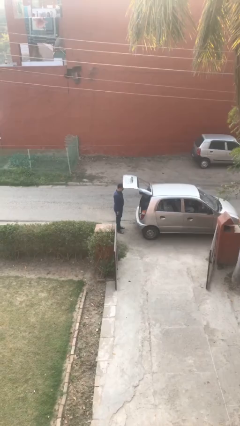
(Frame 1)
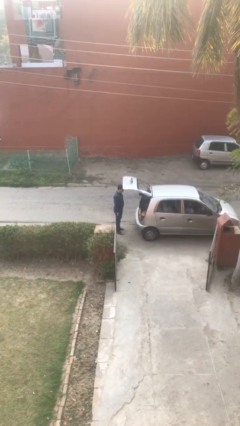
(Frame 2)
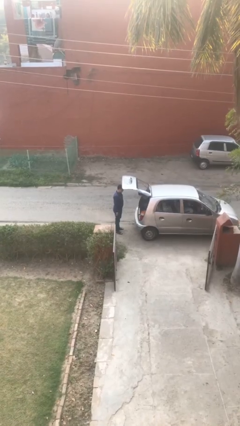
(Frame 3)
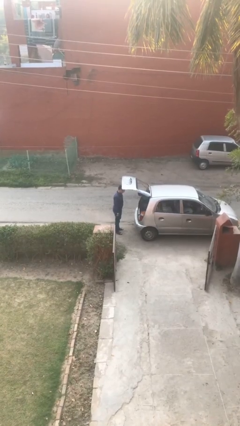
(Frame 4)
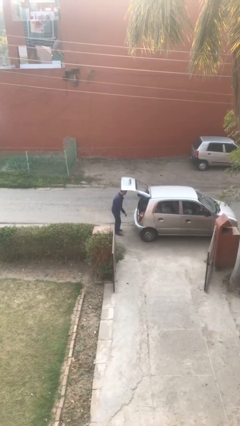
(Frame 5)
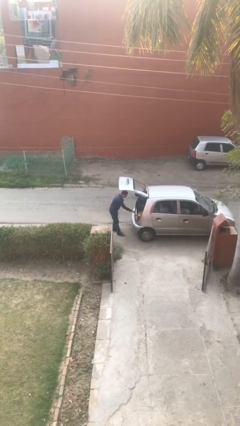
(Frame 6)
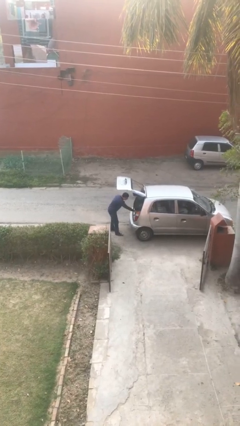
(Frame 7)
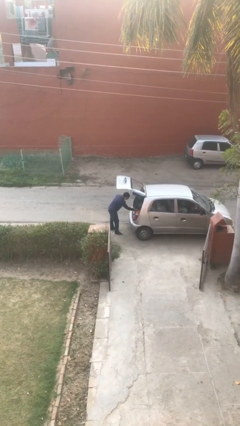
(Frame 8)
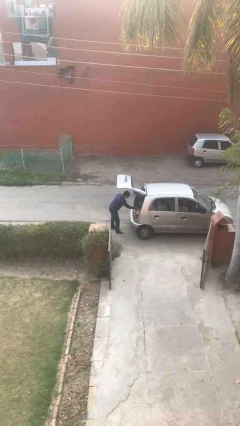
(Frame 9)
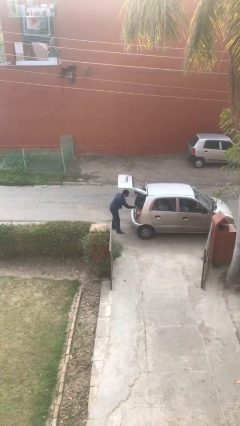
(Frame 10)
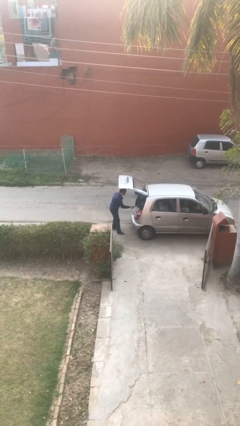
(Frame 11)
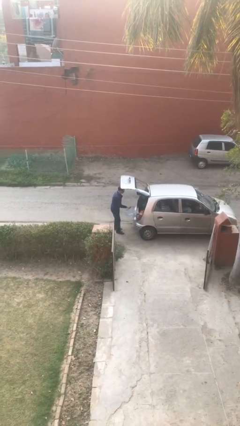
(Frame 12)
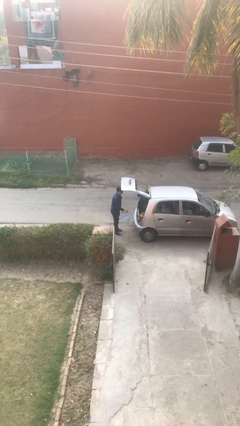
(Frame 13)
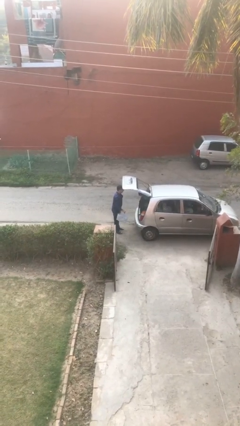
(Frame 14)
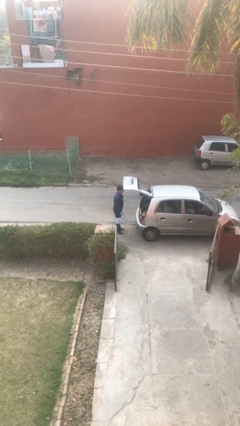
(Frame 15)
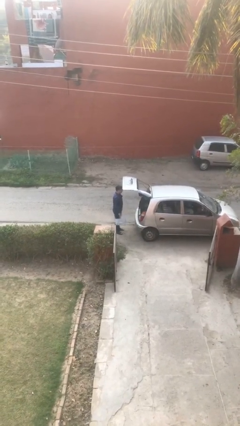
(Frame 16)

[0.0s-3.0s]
person unloads car

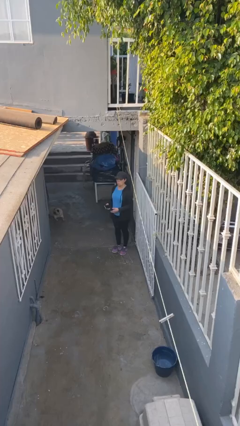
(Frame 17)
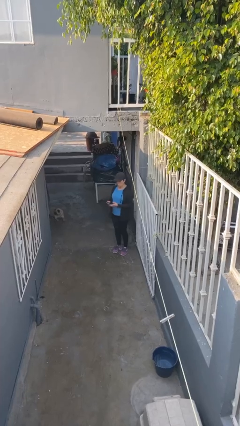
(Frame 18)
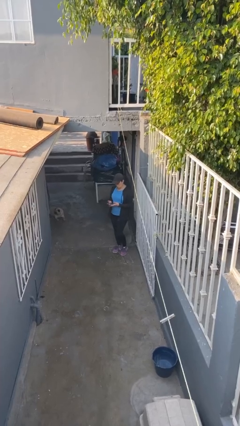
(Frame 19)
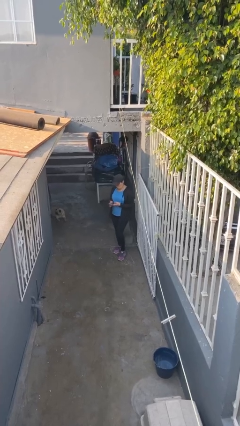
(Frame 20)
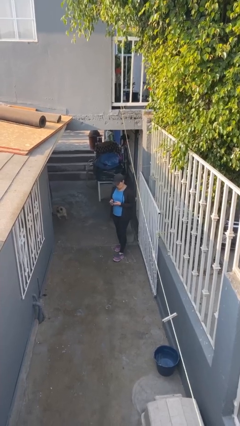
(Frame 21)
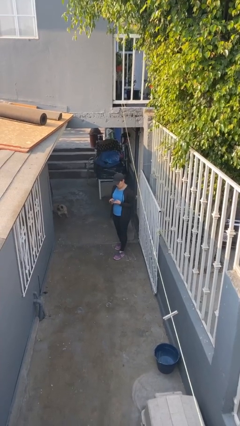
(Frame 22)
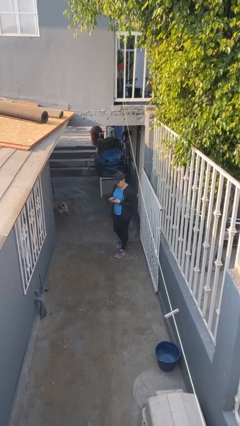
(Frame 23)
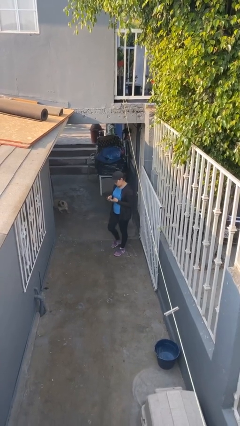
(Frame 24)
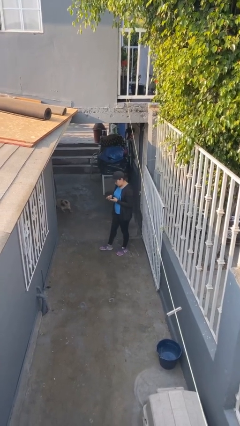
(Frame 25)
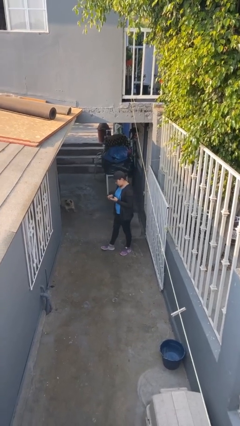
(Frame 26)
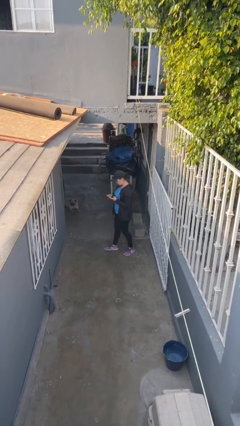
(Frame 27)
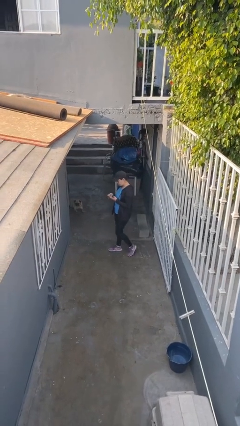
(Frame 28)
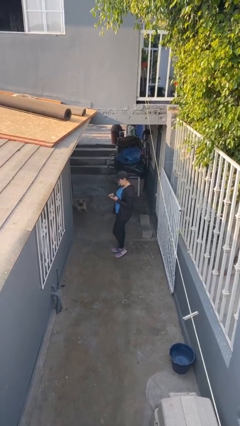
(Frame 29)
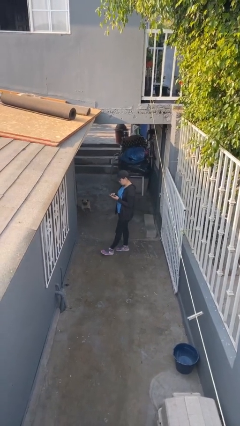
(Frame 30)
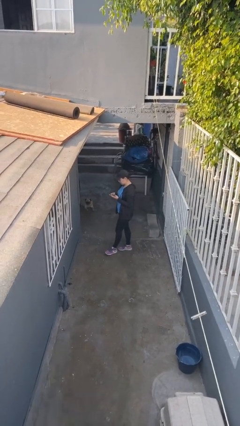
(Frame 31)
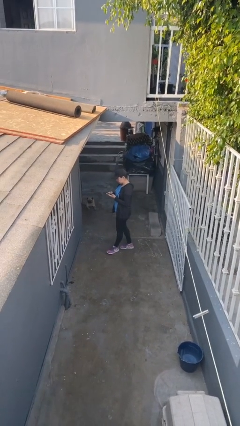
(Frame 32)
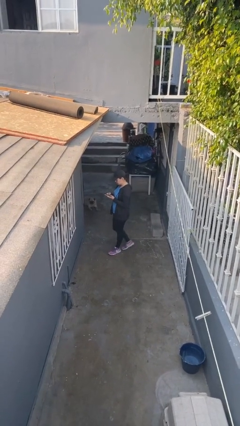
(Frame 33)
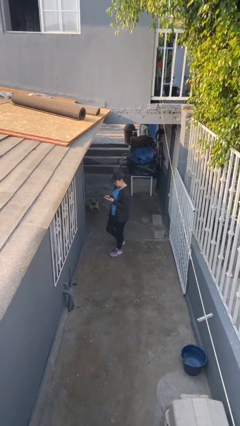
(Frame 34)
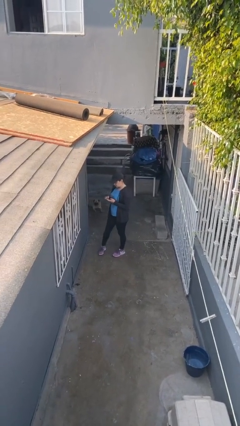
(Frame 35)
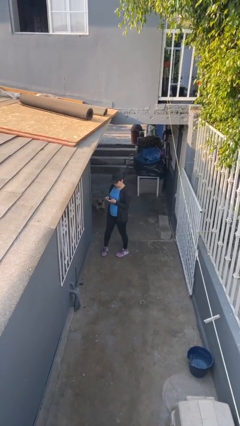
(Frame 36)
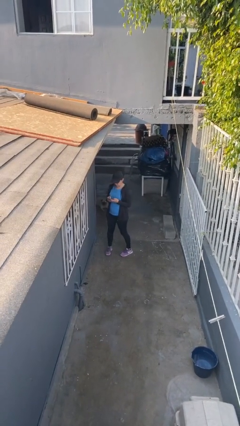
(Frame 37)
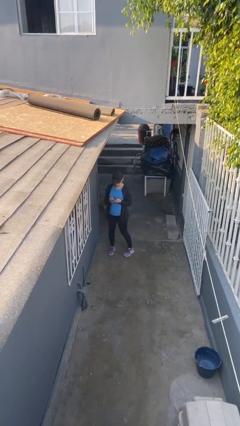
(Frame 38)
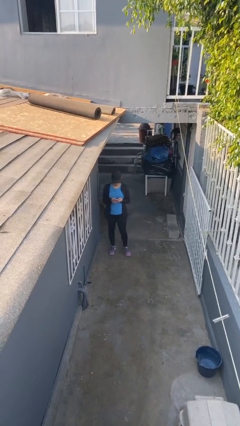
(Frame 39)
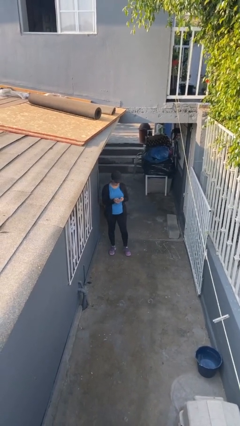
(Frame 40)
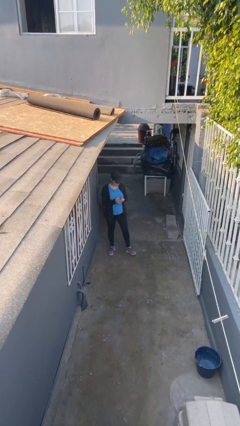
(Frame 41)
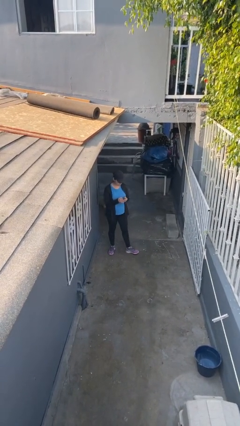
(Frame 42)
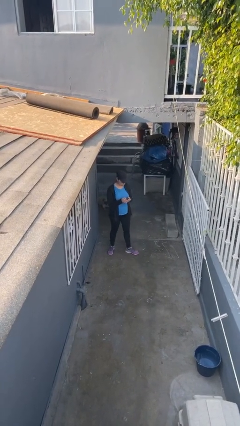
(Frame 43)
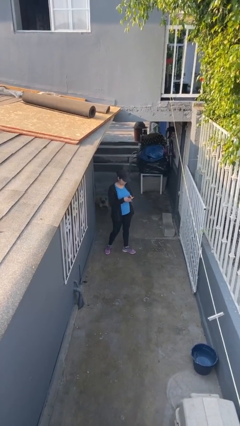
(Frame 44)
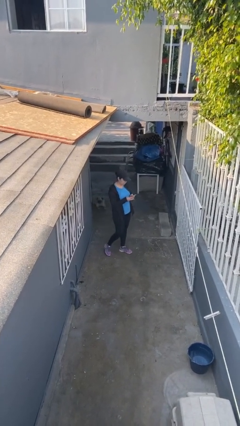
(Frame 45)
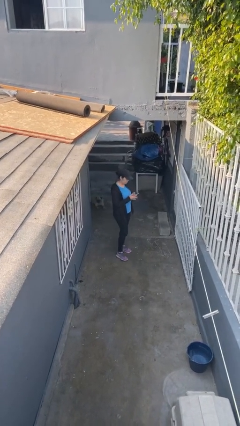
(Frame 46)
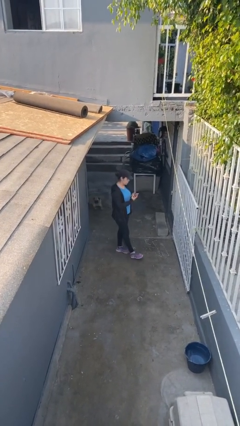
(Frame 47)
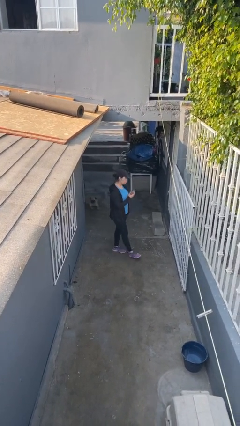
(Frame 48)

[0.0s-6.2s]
person texts on phone

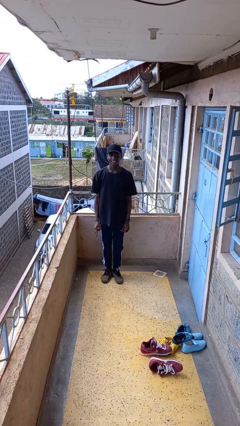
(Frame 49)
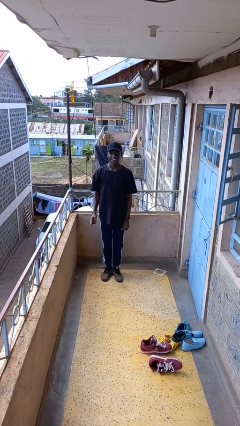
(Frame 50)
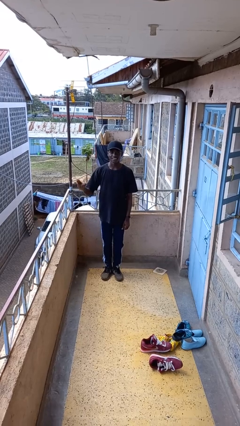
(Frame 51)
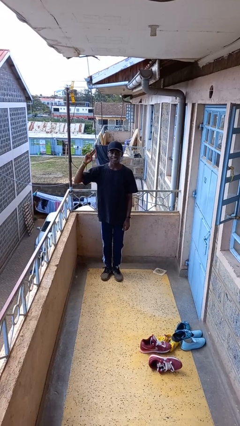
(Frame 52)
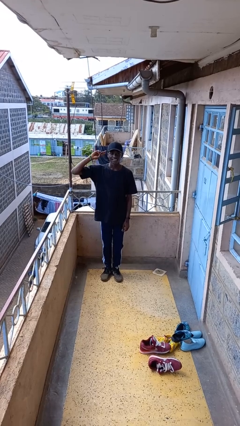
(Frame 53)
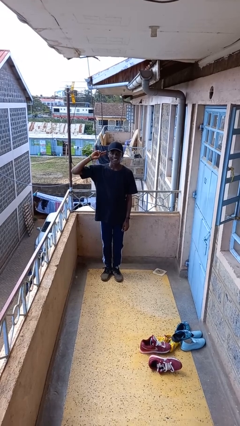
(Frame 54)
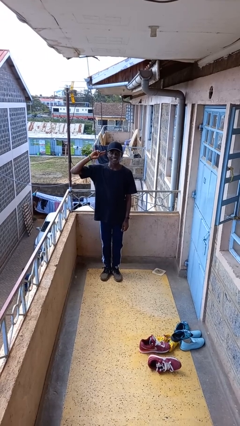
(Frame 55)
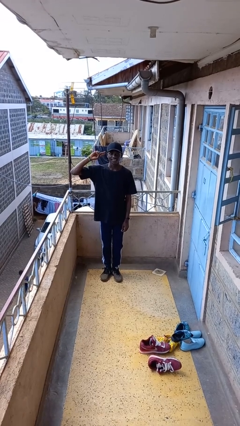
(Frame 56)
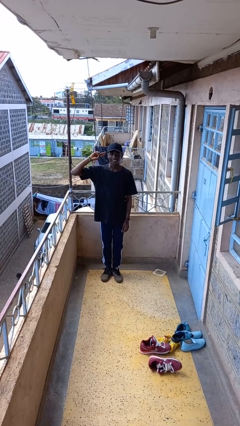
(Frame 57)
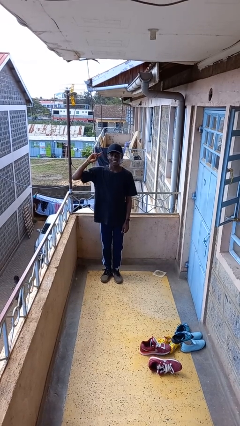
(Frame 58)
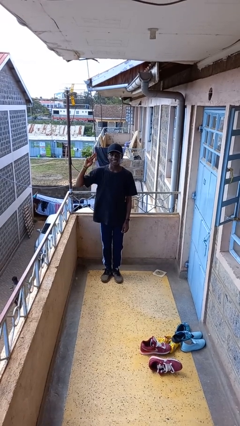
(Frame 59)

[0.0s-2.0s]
person salutes

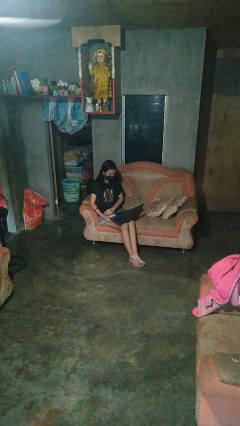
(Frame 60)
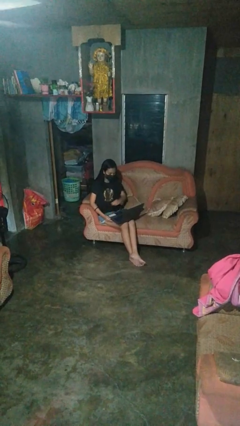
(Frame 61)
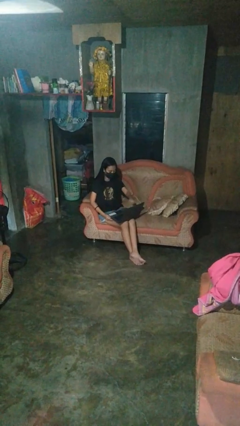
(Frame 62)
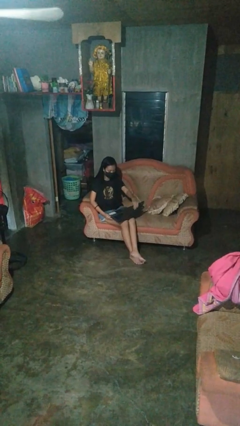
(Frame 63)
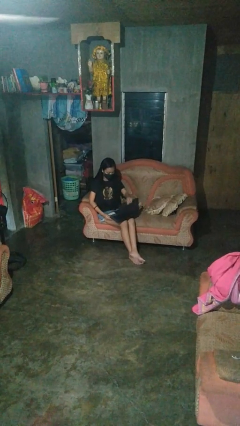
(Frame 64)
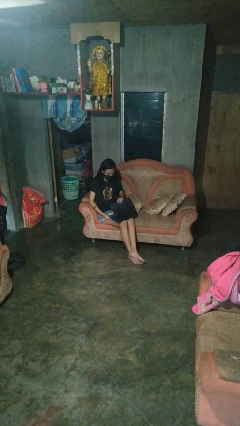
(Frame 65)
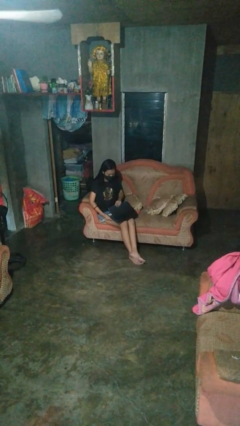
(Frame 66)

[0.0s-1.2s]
person closes laptop

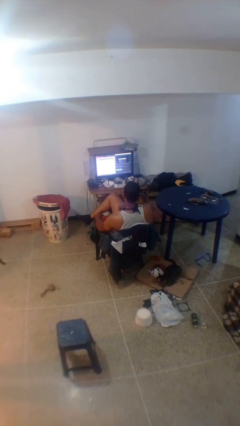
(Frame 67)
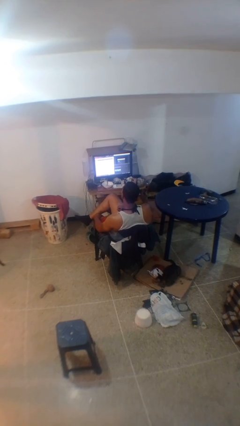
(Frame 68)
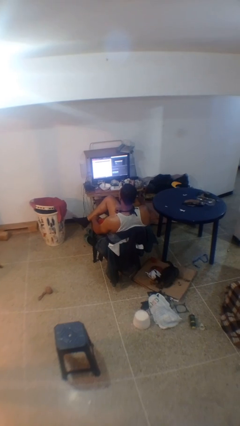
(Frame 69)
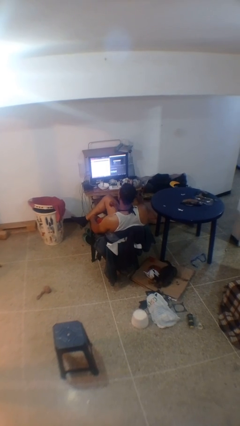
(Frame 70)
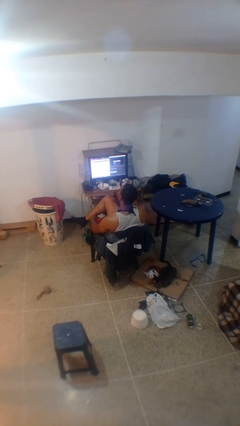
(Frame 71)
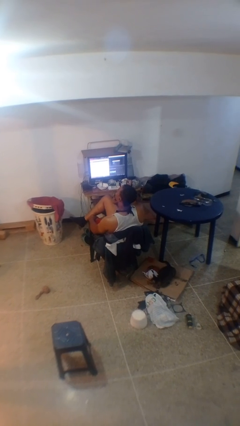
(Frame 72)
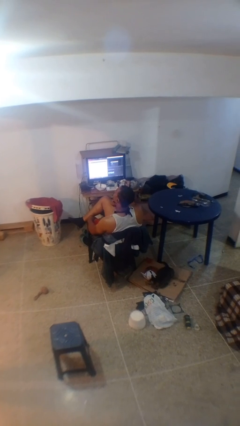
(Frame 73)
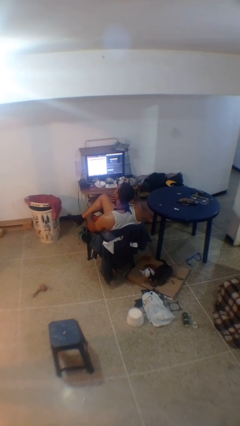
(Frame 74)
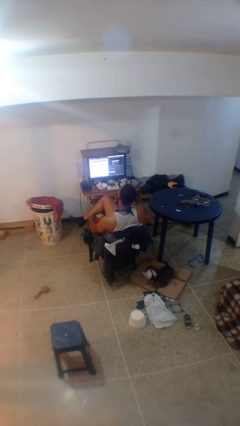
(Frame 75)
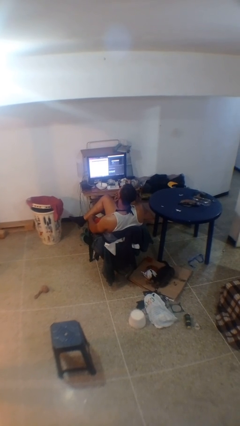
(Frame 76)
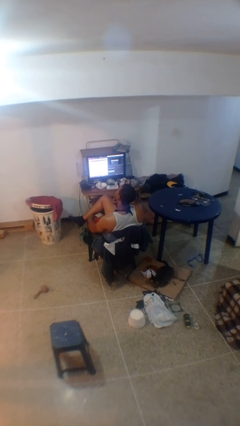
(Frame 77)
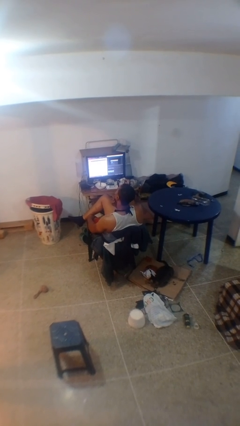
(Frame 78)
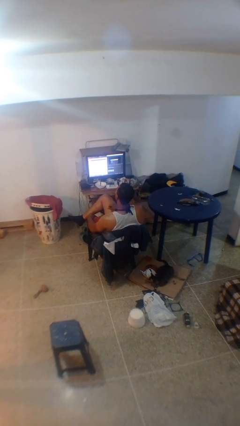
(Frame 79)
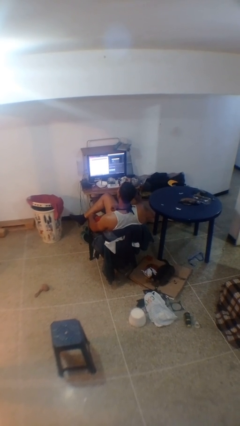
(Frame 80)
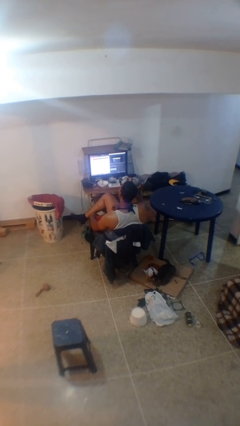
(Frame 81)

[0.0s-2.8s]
person strokes chin

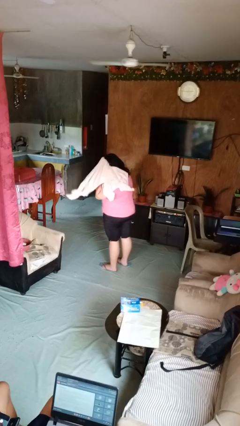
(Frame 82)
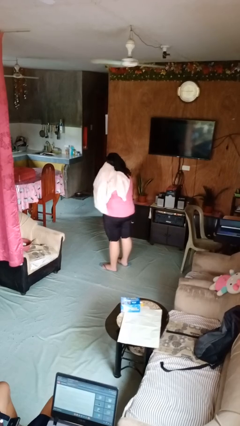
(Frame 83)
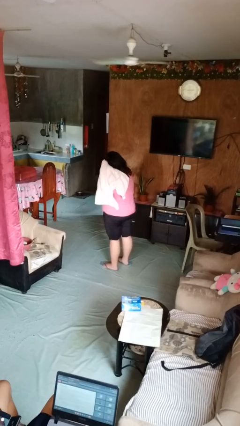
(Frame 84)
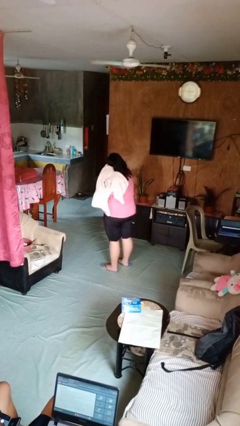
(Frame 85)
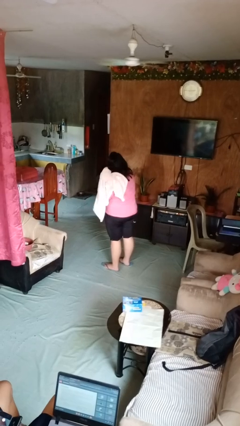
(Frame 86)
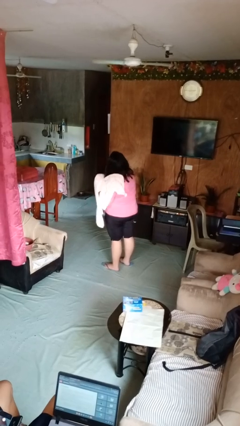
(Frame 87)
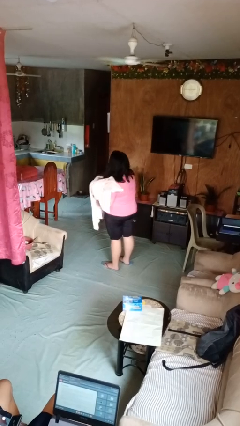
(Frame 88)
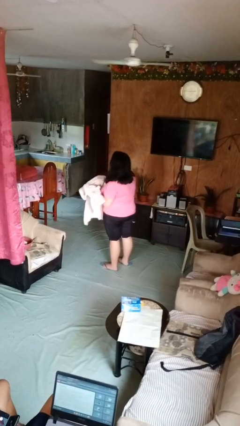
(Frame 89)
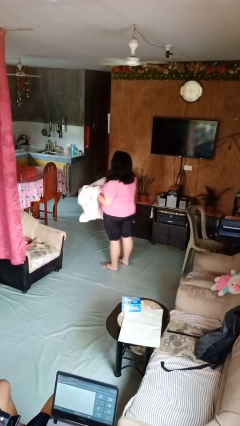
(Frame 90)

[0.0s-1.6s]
person dries hair with towel

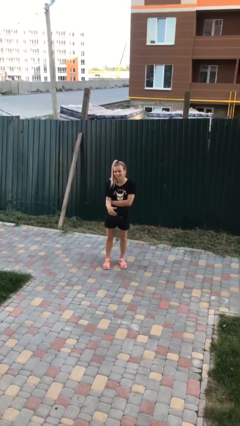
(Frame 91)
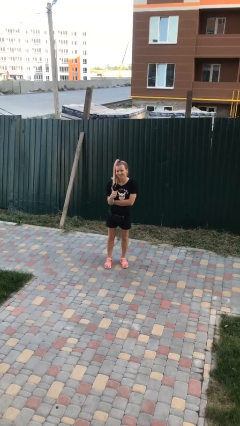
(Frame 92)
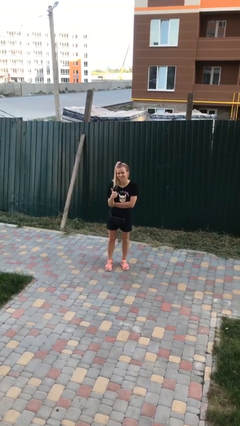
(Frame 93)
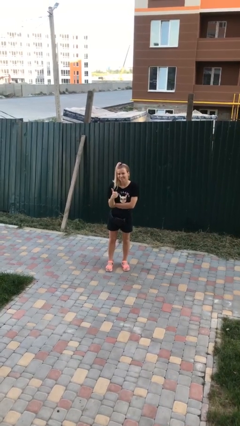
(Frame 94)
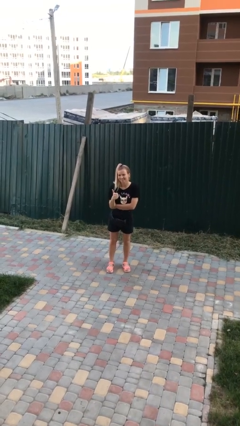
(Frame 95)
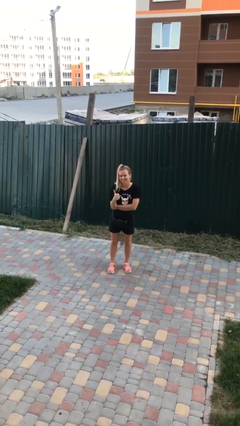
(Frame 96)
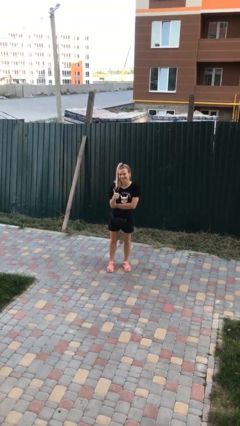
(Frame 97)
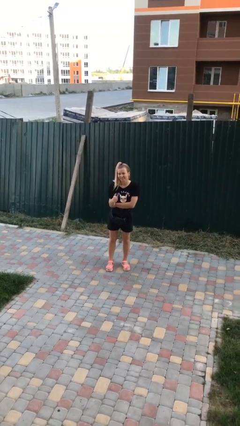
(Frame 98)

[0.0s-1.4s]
person gestures thumbs up
